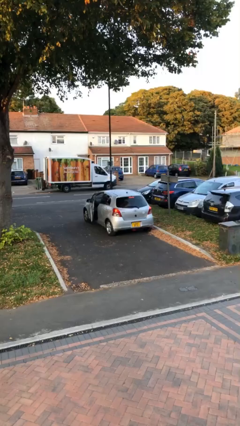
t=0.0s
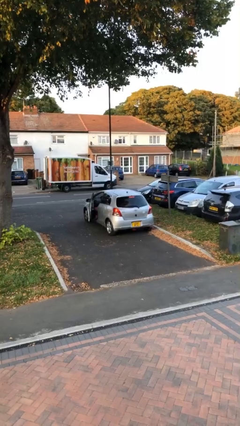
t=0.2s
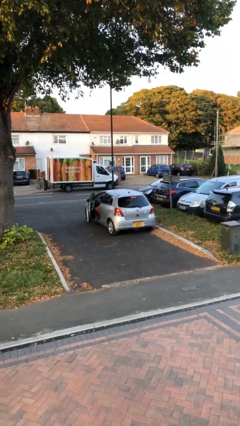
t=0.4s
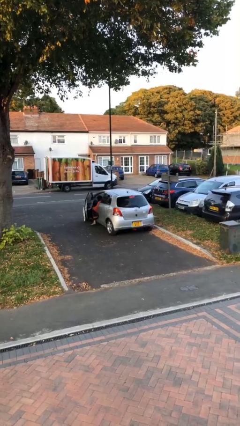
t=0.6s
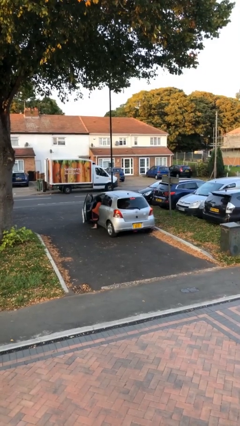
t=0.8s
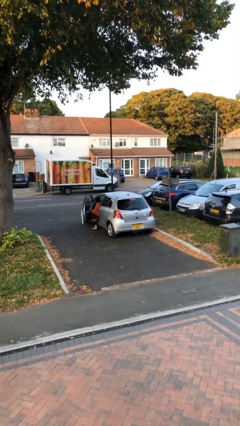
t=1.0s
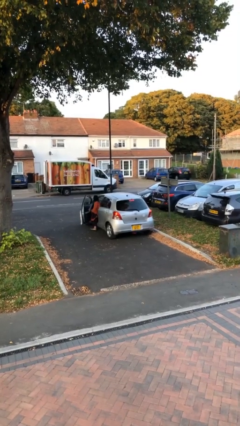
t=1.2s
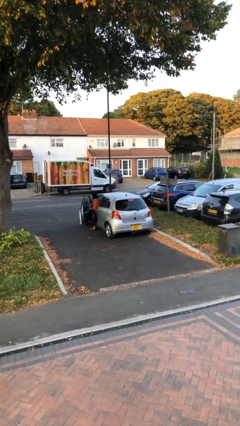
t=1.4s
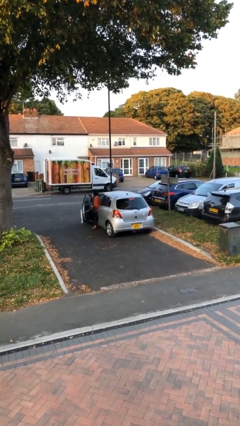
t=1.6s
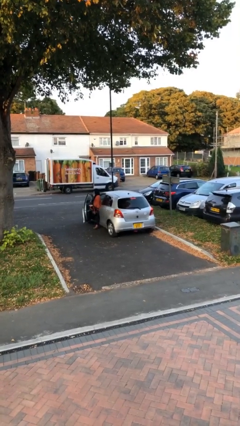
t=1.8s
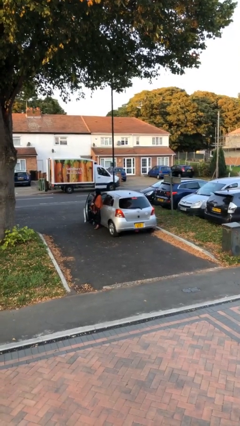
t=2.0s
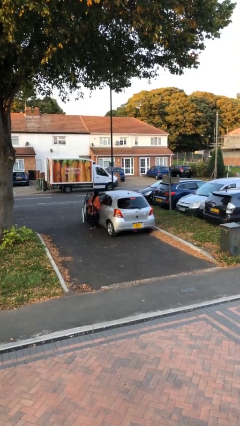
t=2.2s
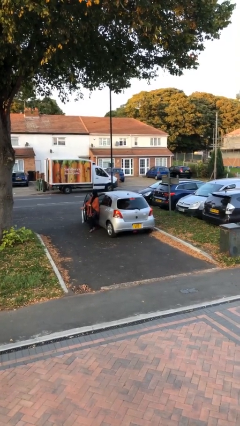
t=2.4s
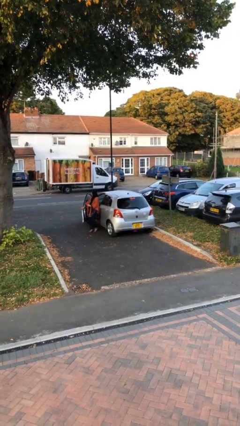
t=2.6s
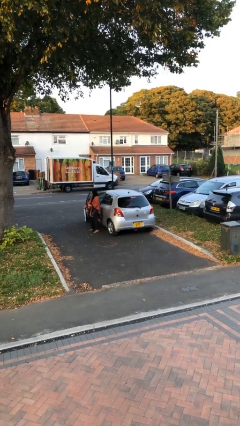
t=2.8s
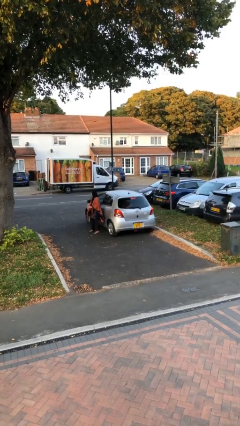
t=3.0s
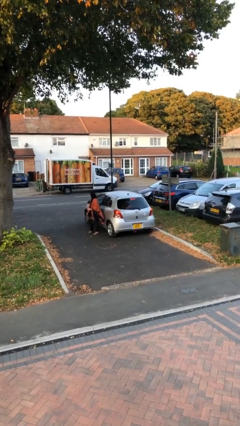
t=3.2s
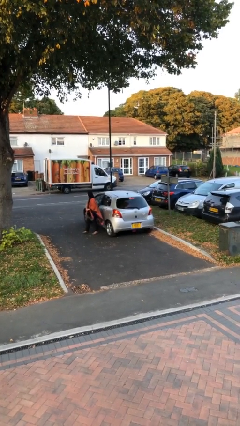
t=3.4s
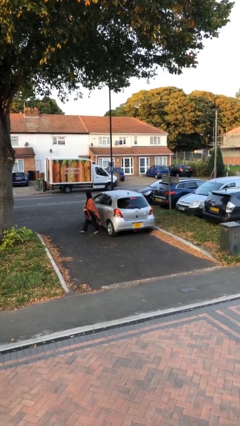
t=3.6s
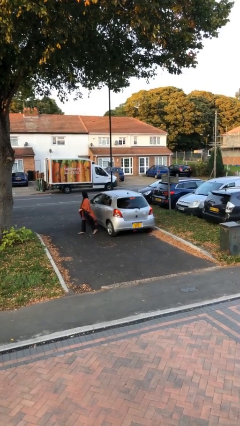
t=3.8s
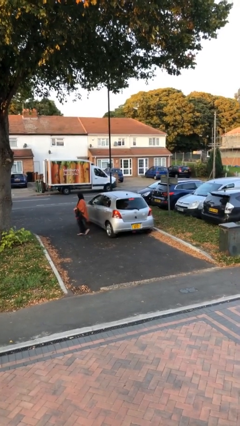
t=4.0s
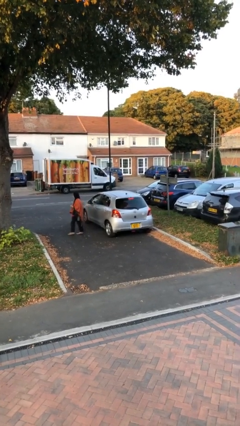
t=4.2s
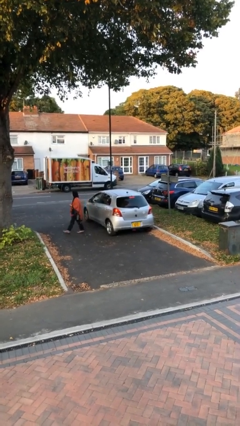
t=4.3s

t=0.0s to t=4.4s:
car drops off person

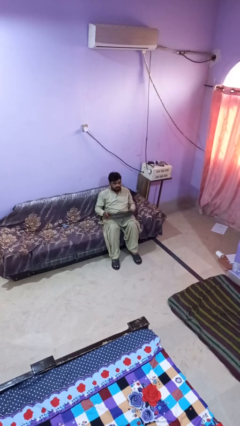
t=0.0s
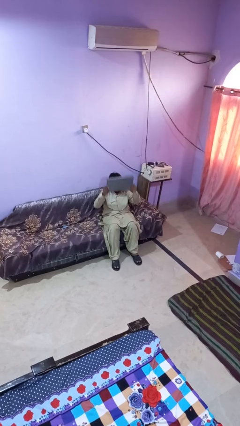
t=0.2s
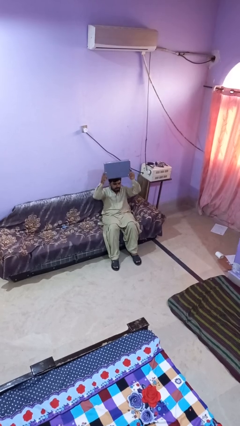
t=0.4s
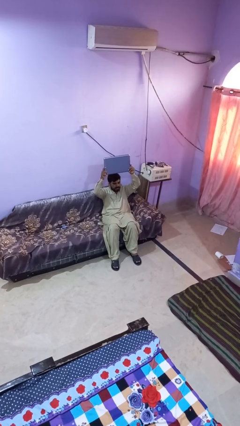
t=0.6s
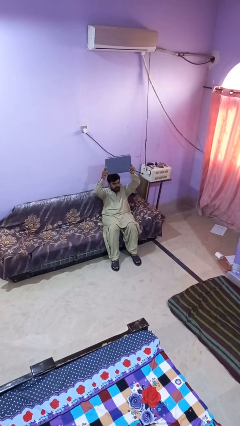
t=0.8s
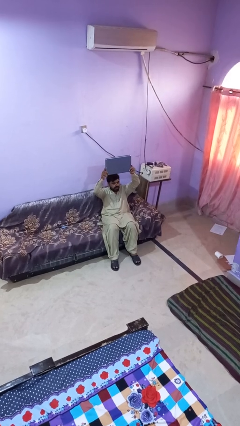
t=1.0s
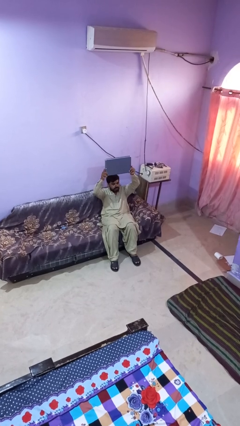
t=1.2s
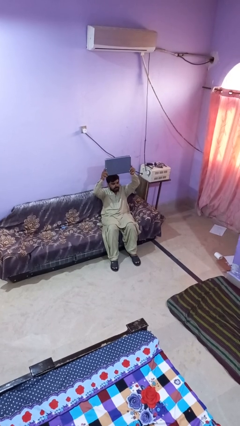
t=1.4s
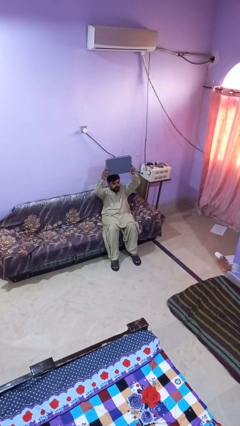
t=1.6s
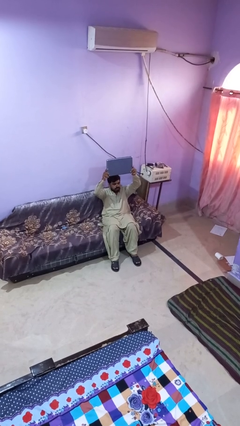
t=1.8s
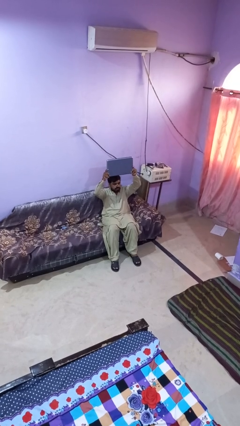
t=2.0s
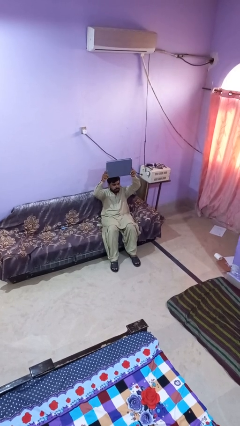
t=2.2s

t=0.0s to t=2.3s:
person holds object above head

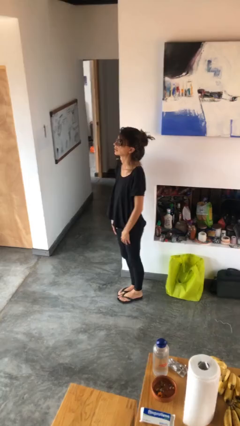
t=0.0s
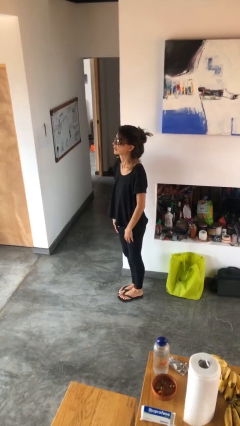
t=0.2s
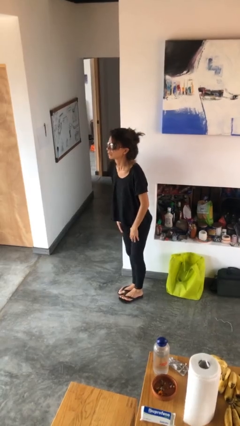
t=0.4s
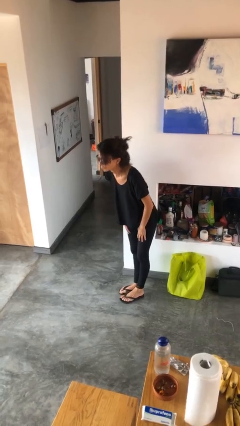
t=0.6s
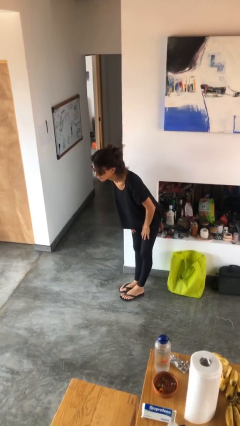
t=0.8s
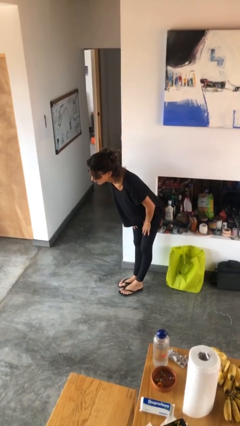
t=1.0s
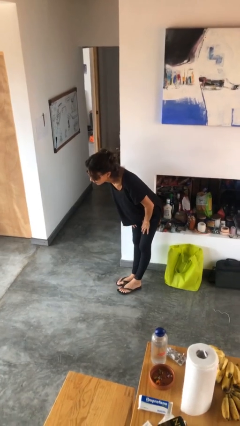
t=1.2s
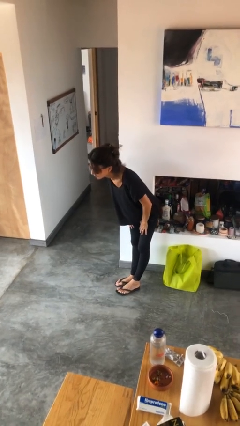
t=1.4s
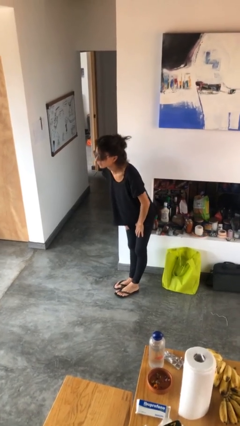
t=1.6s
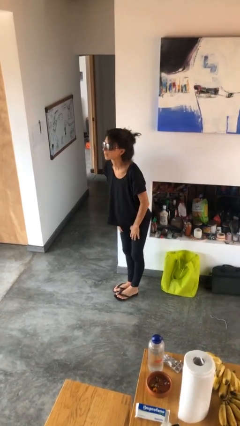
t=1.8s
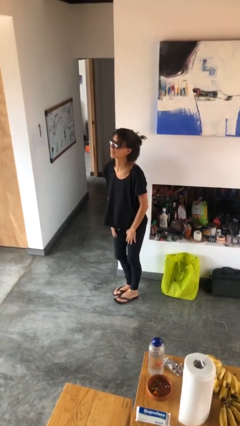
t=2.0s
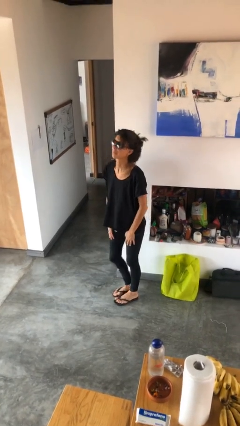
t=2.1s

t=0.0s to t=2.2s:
person bows

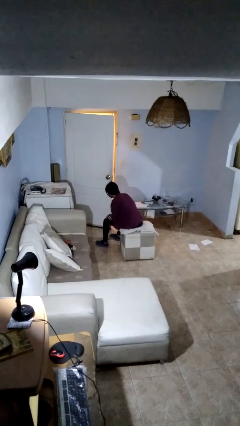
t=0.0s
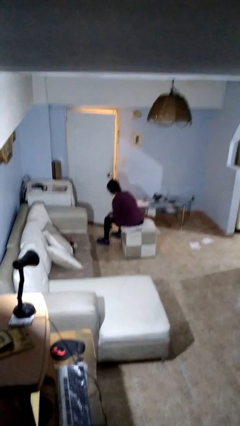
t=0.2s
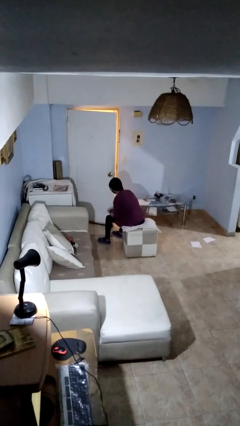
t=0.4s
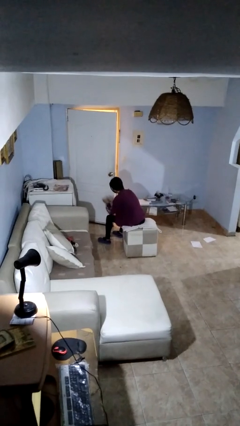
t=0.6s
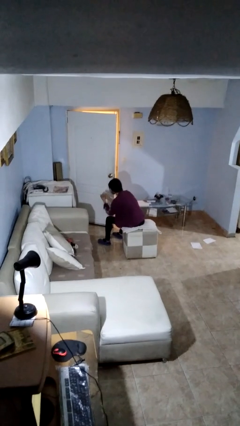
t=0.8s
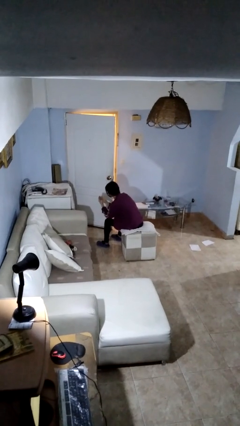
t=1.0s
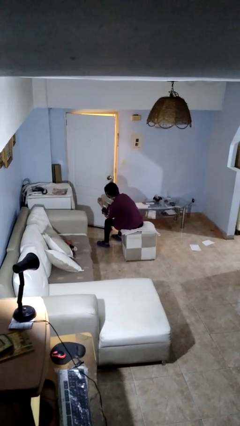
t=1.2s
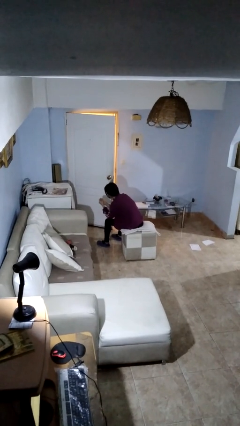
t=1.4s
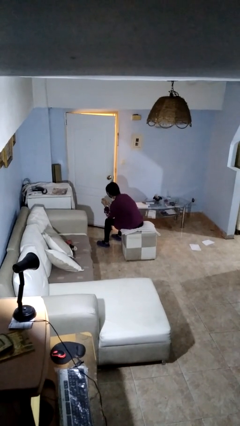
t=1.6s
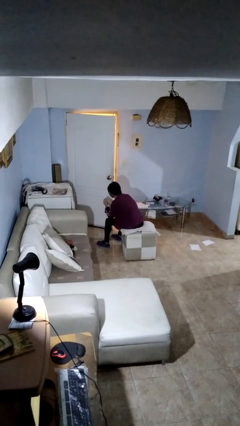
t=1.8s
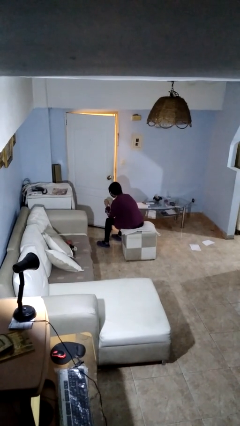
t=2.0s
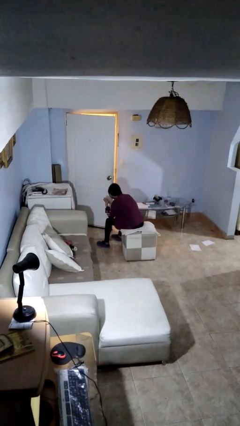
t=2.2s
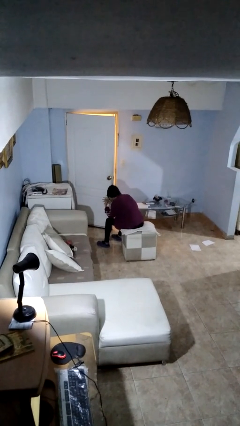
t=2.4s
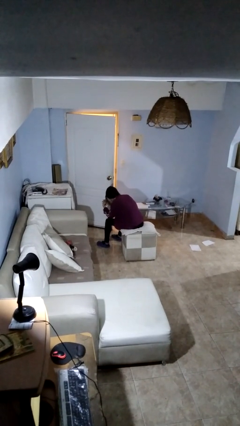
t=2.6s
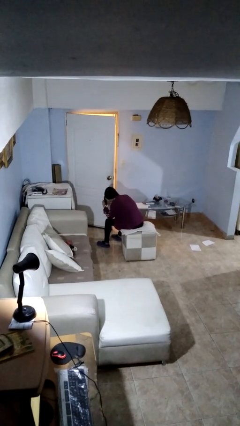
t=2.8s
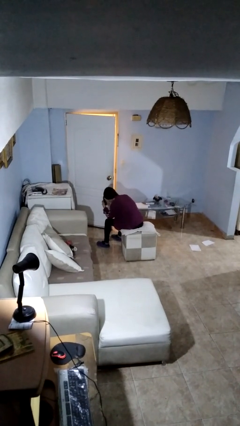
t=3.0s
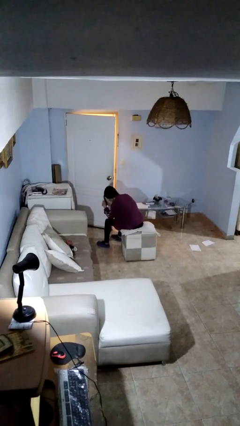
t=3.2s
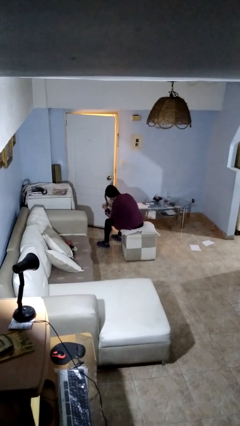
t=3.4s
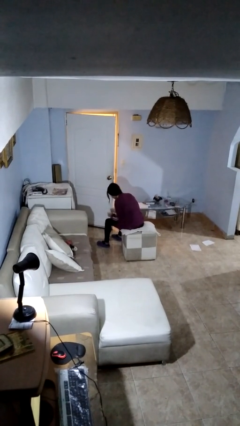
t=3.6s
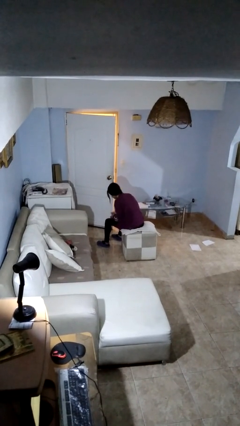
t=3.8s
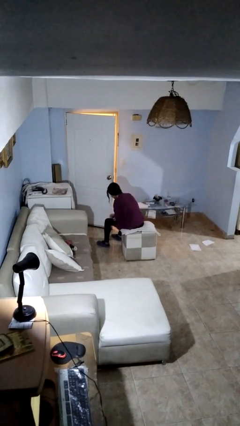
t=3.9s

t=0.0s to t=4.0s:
person looks at hands in lap

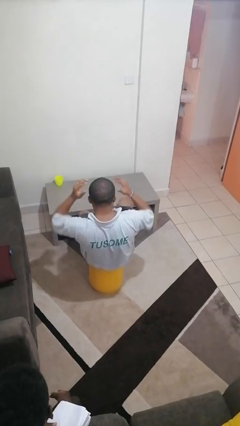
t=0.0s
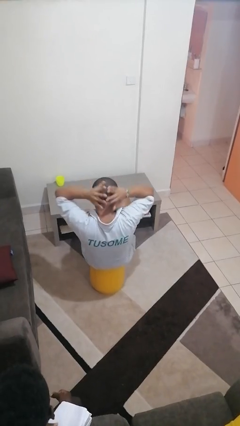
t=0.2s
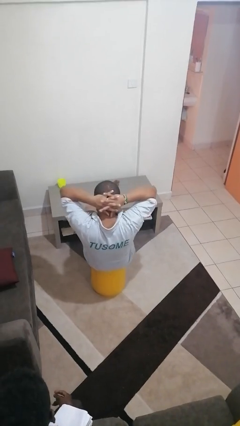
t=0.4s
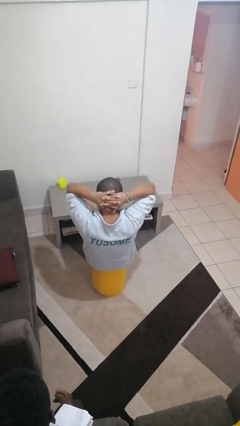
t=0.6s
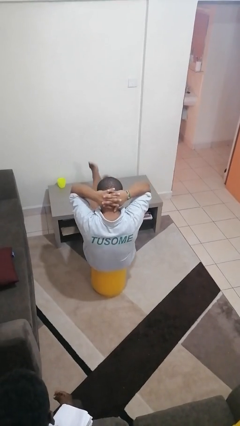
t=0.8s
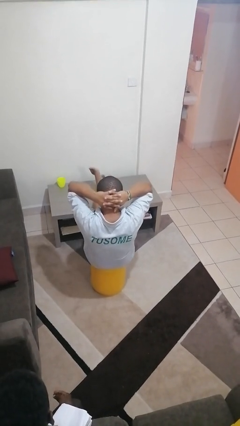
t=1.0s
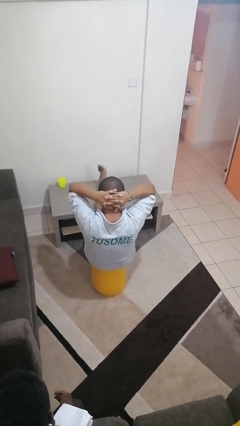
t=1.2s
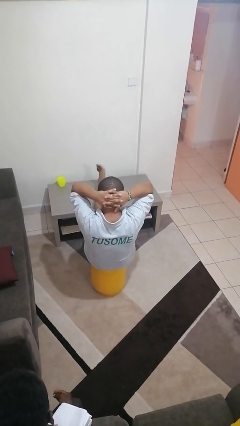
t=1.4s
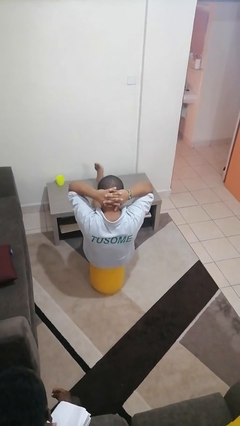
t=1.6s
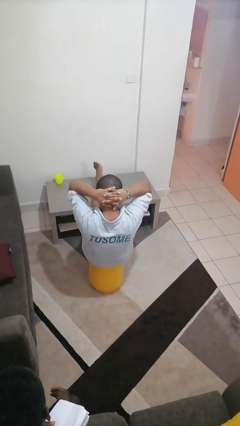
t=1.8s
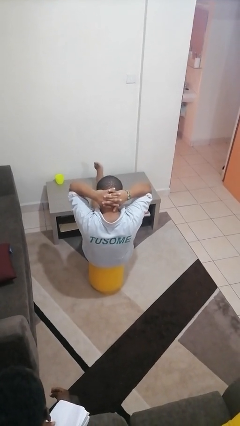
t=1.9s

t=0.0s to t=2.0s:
person puts feet up

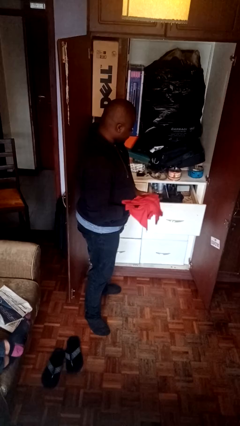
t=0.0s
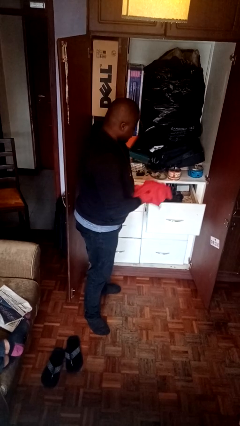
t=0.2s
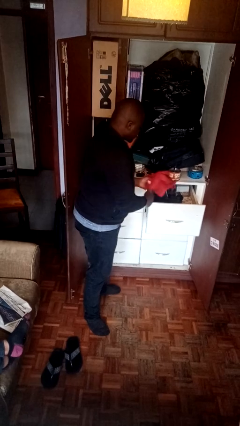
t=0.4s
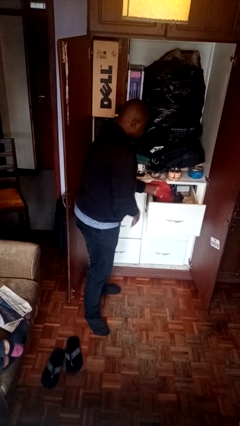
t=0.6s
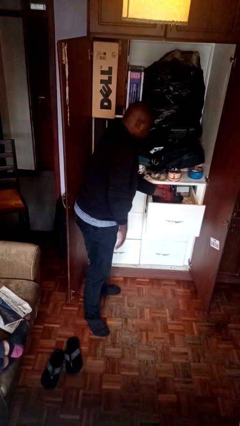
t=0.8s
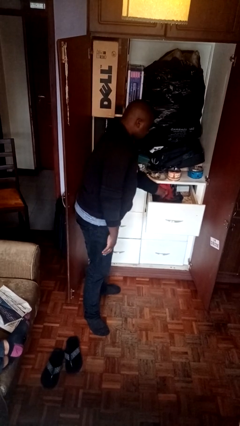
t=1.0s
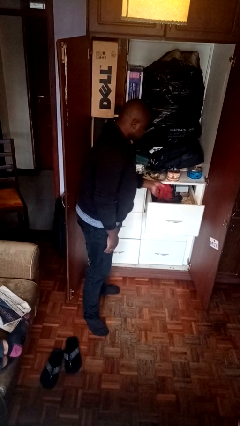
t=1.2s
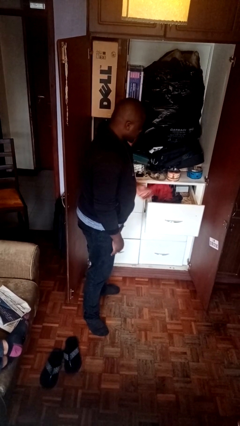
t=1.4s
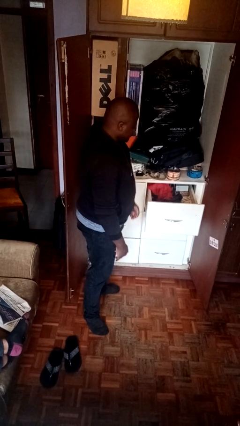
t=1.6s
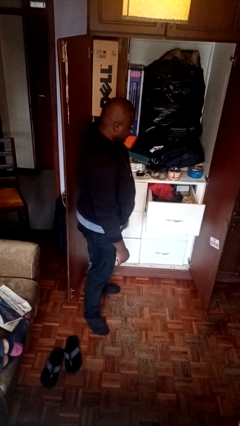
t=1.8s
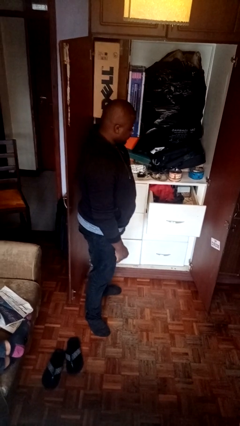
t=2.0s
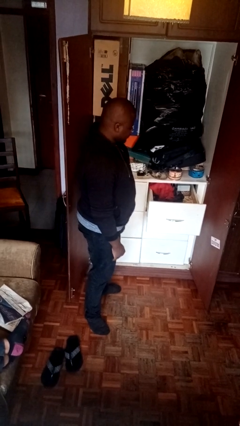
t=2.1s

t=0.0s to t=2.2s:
person puts clothes into dresser

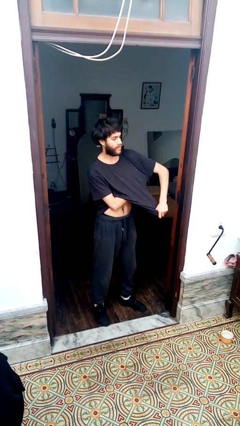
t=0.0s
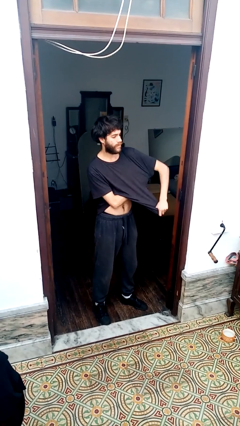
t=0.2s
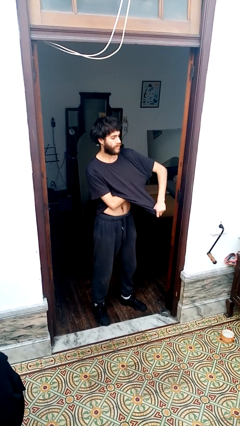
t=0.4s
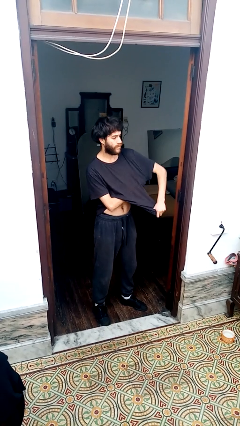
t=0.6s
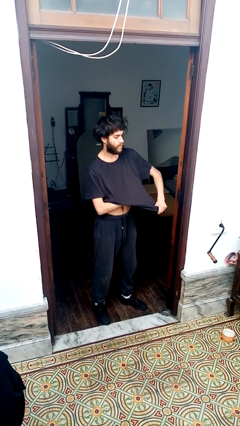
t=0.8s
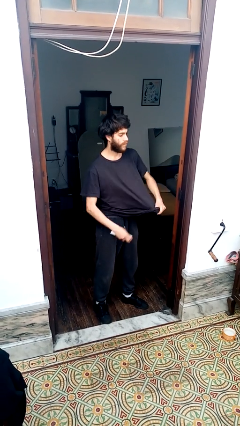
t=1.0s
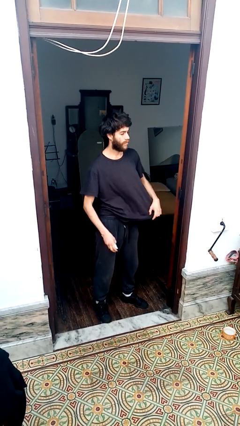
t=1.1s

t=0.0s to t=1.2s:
person applies deodorant
